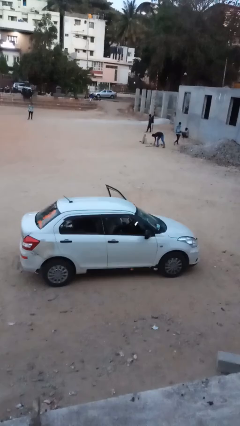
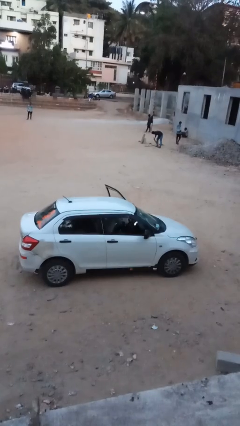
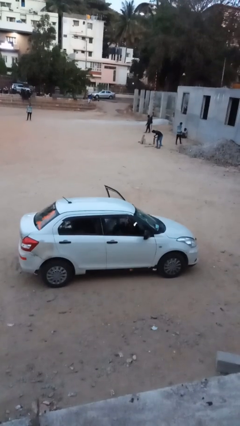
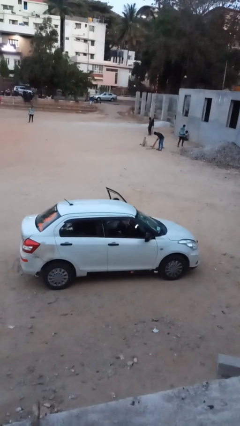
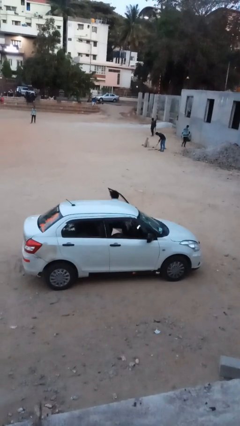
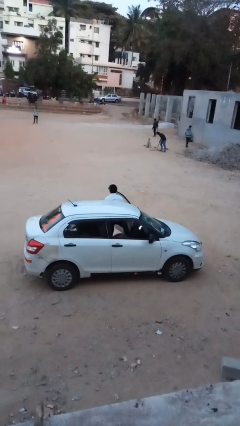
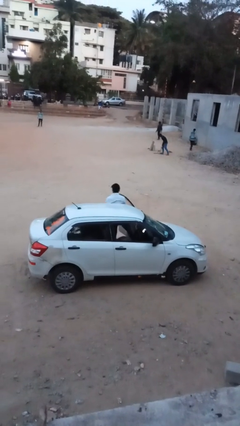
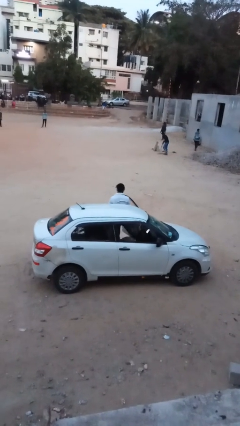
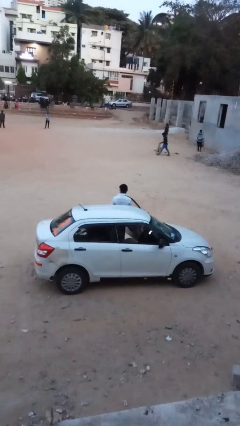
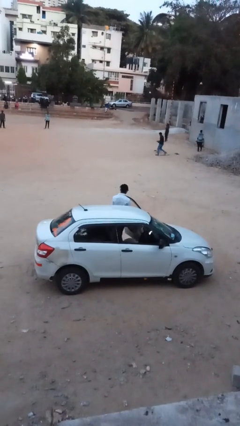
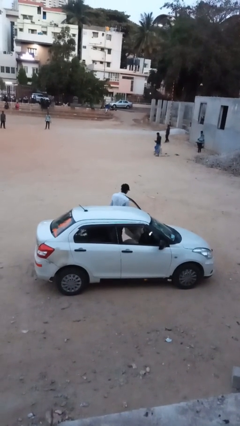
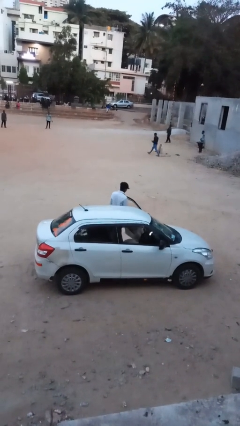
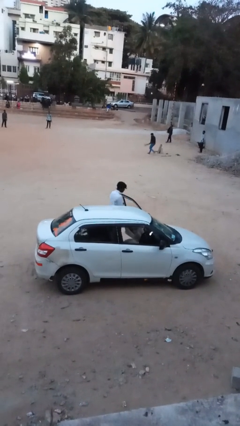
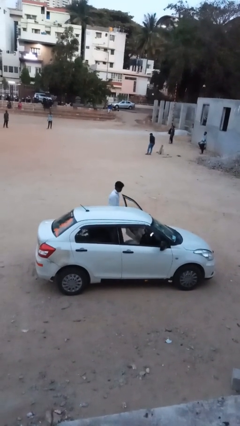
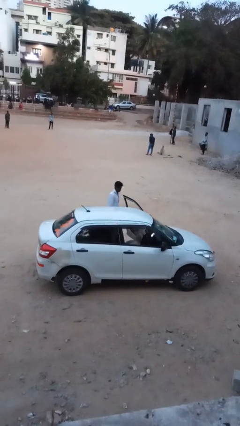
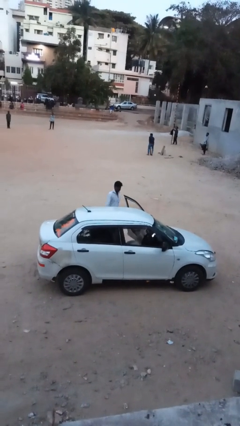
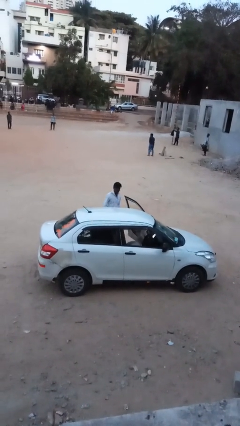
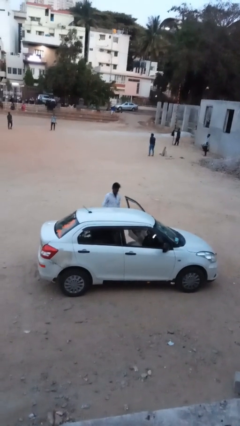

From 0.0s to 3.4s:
person exits car

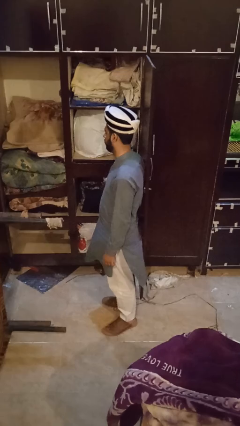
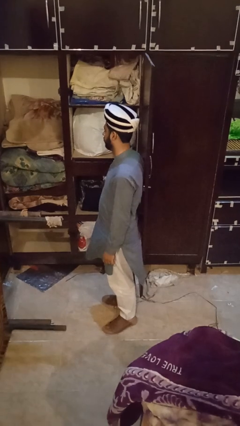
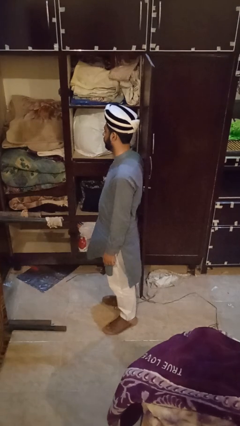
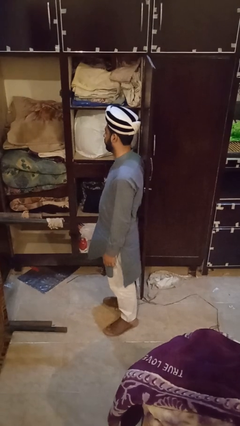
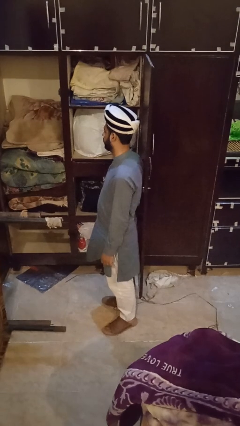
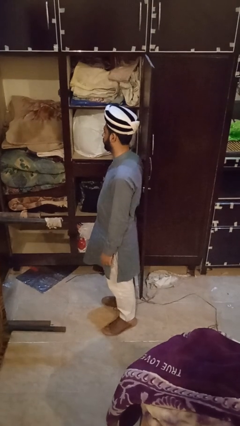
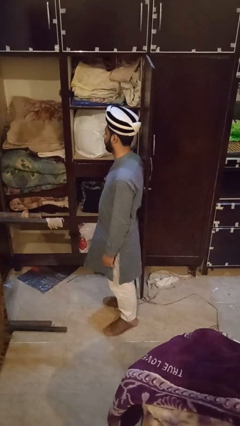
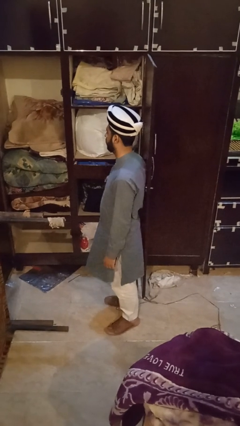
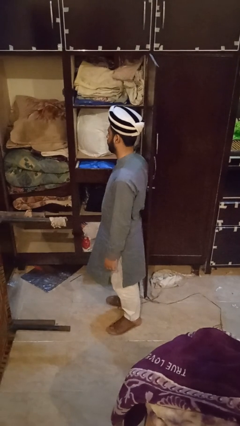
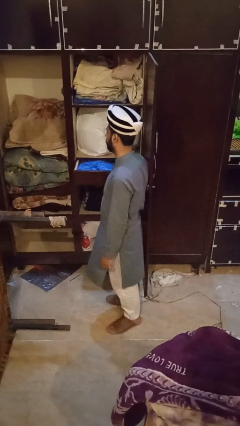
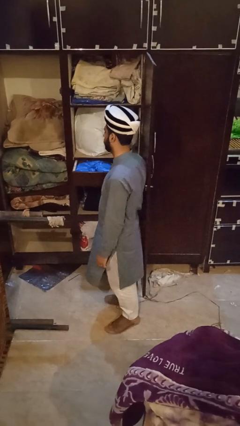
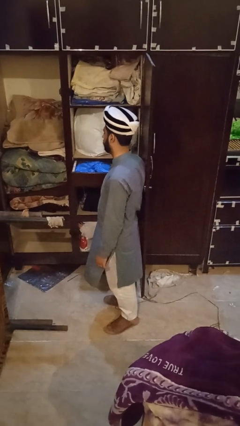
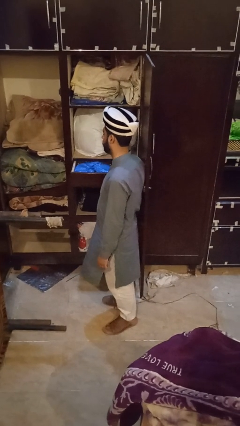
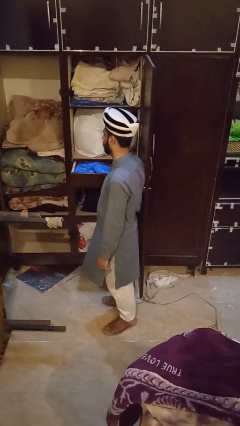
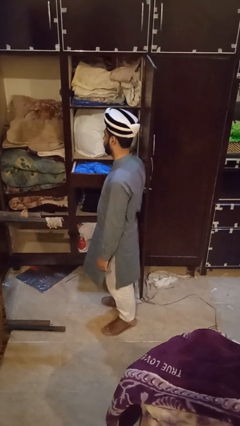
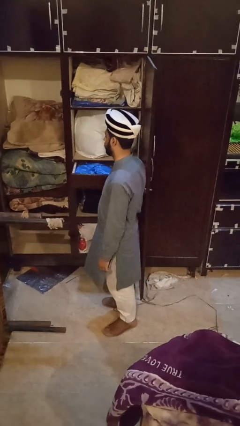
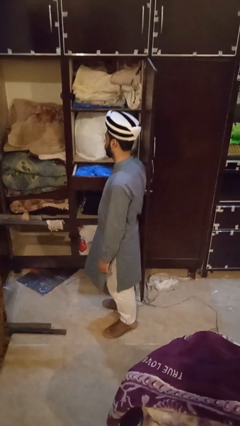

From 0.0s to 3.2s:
person opens dresser drawer

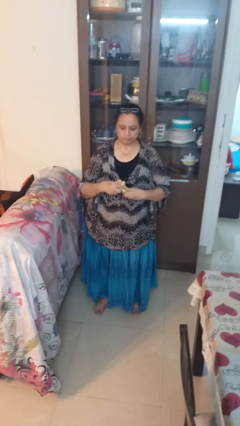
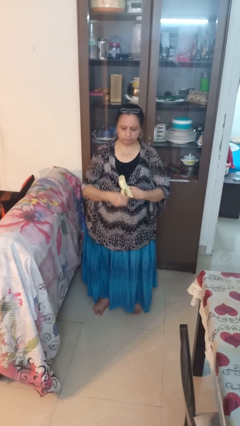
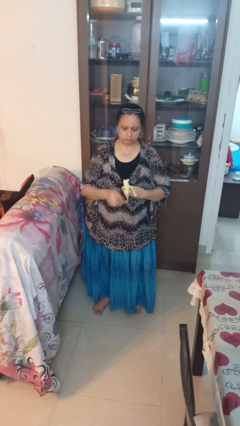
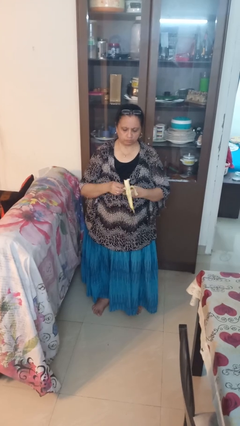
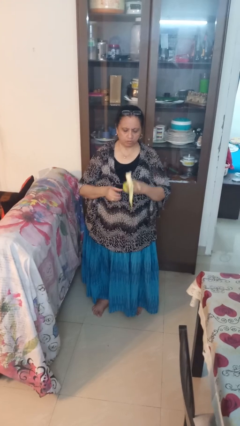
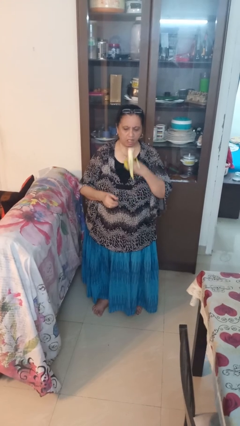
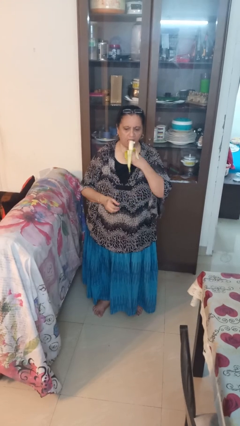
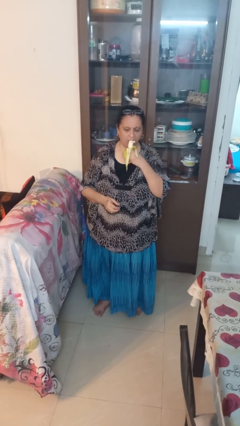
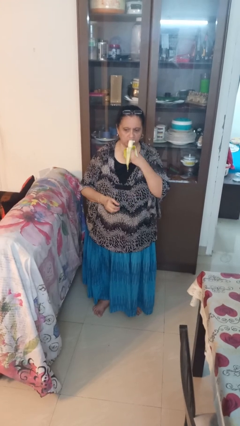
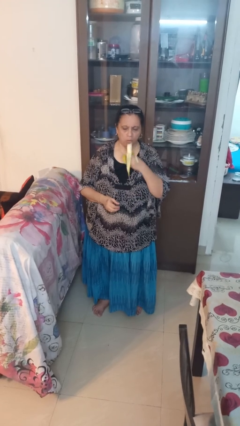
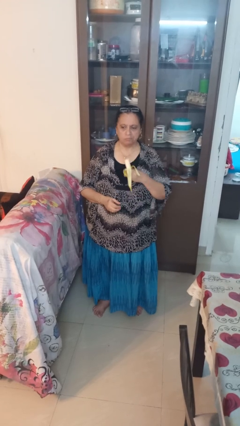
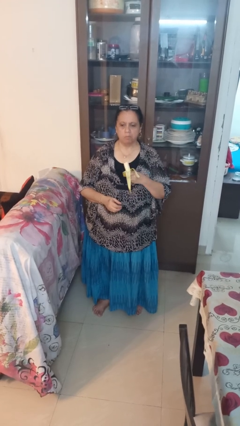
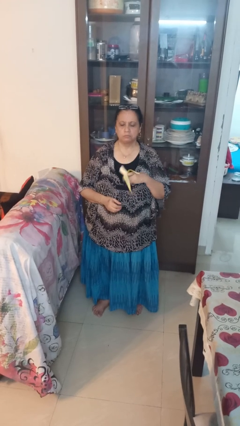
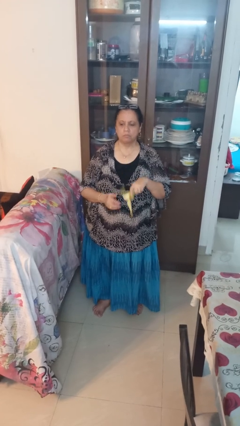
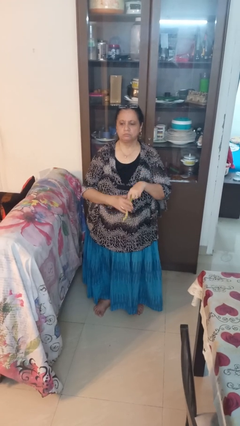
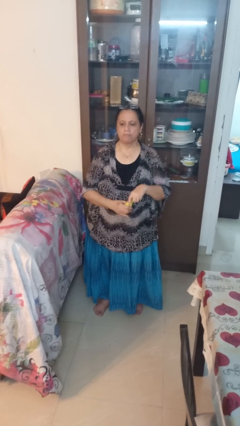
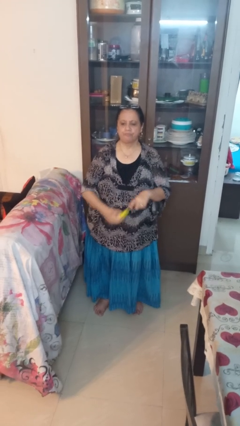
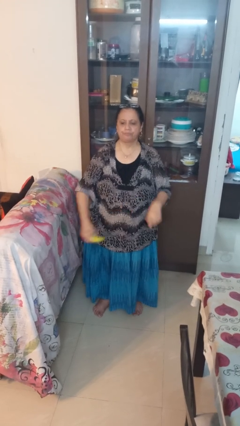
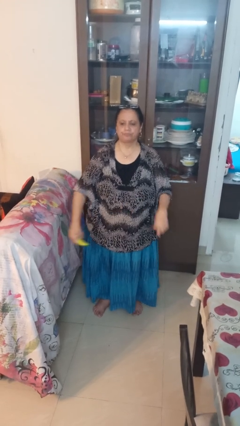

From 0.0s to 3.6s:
person eats banana

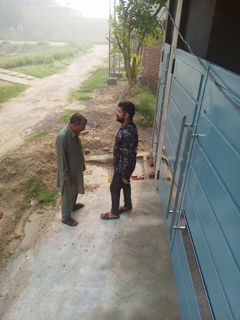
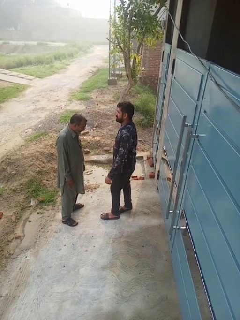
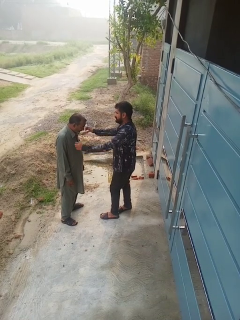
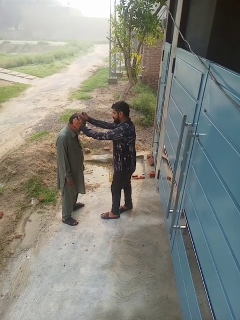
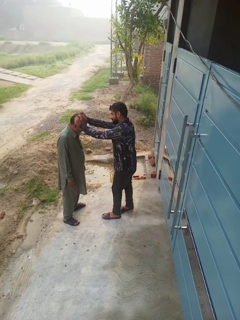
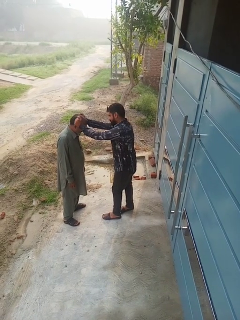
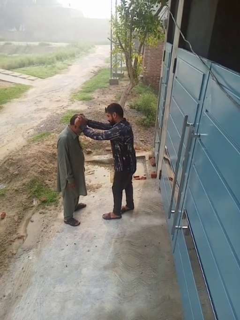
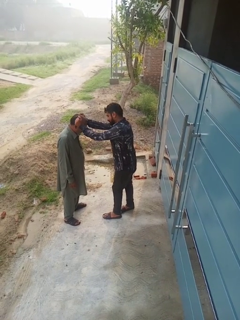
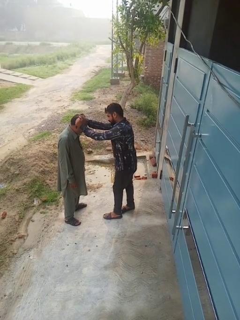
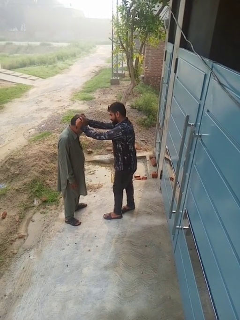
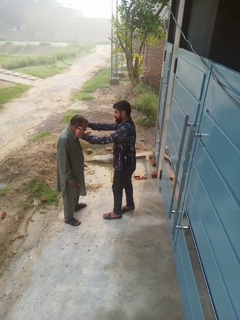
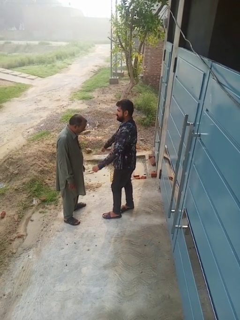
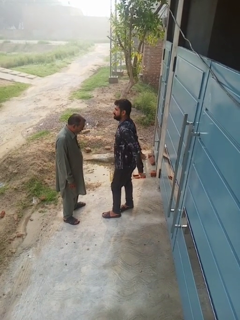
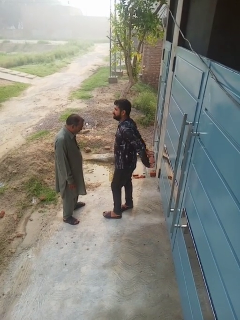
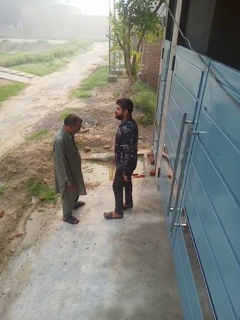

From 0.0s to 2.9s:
person grabs person by hair

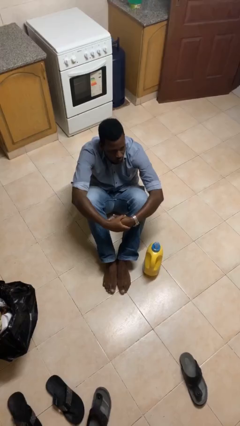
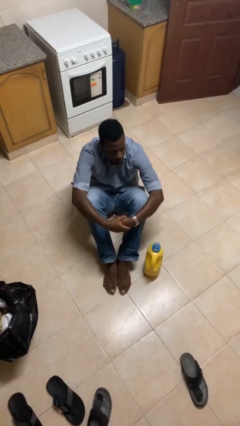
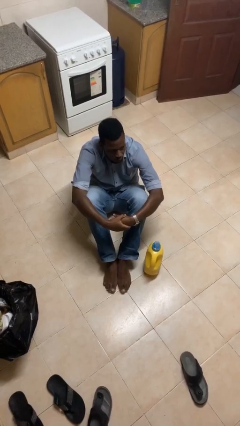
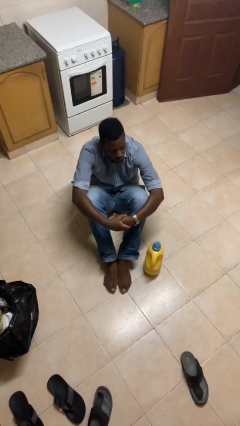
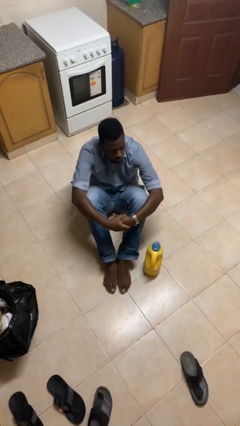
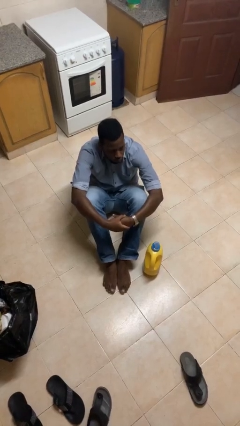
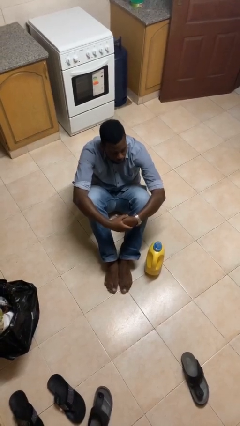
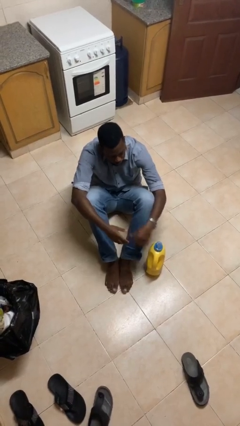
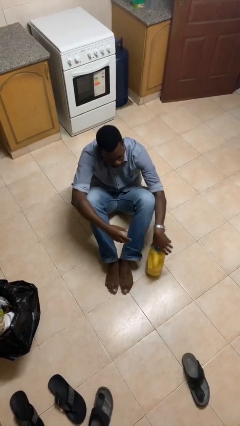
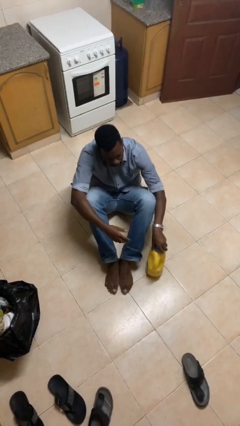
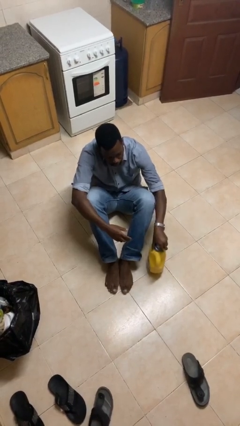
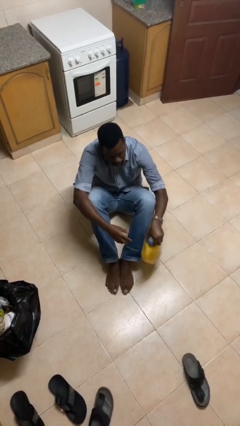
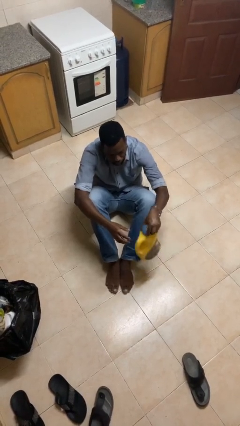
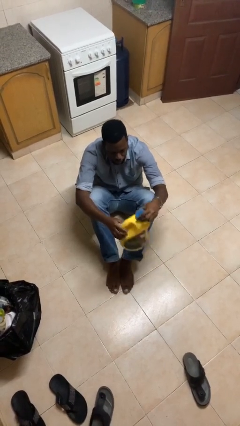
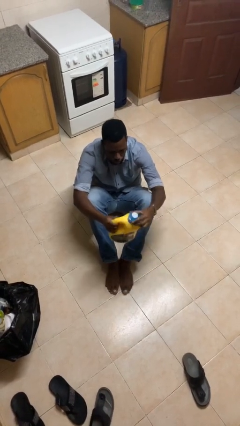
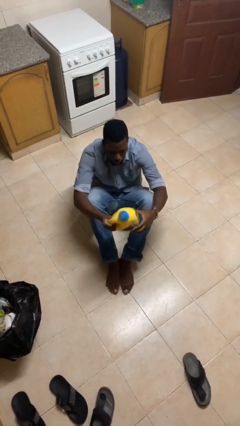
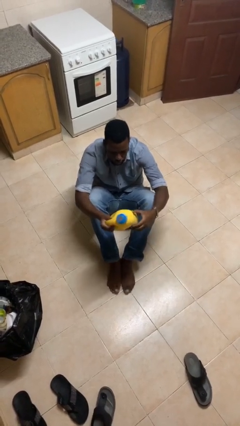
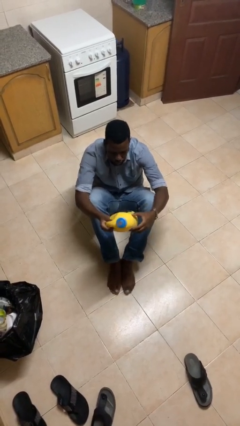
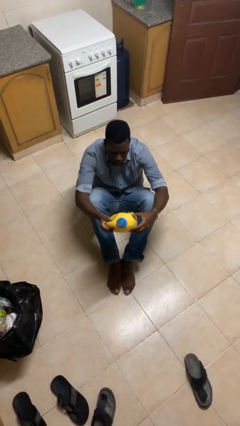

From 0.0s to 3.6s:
person picks up object from floor

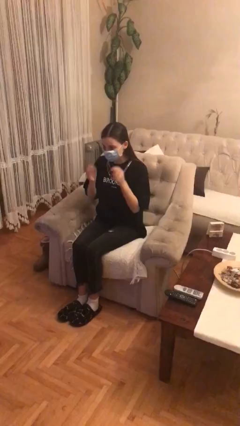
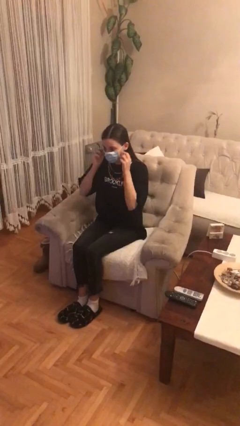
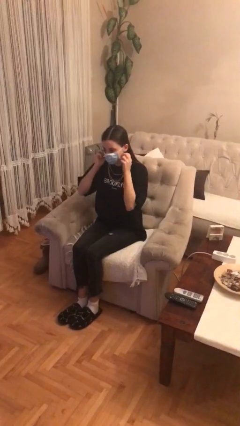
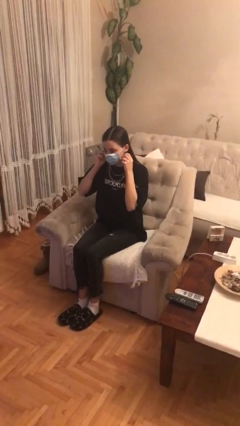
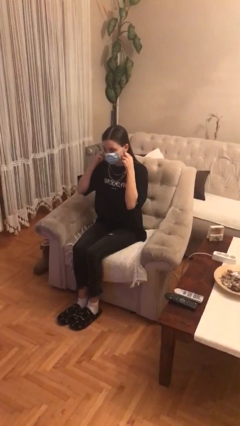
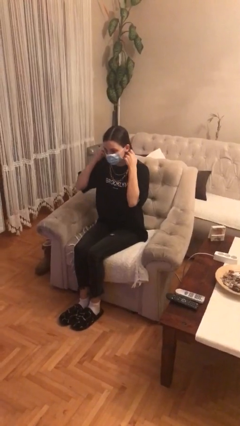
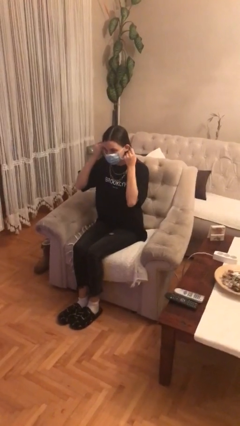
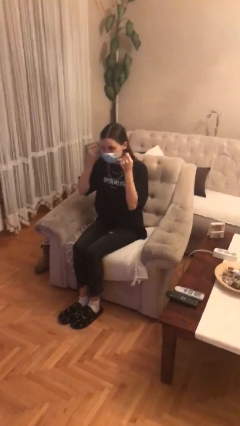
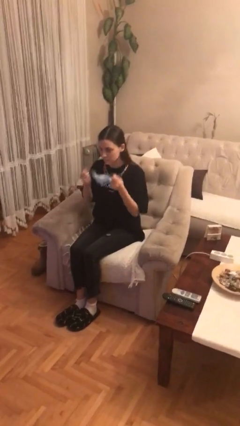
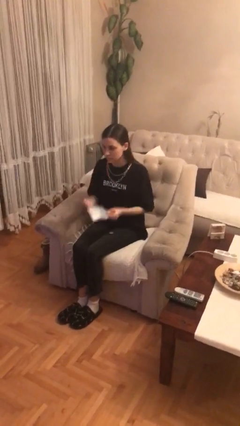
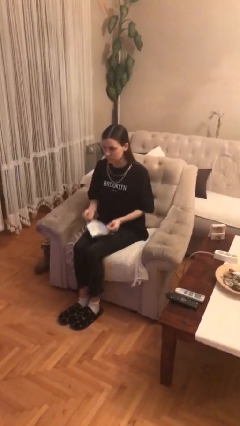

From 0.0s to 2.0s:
person takes off facemask
